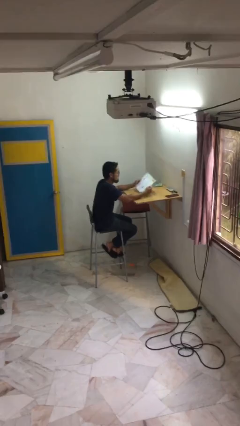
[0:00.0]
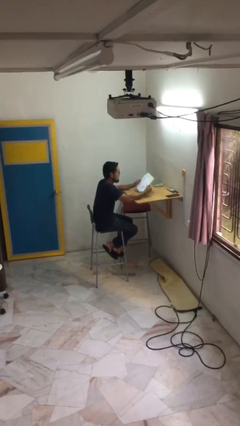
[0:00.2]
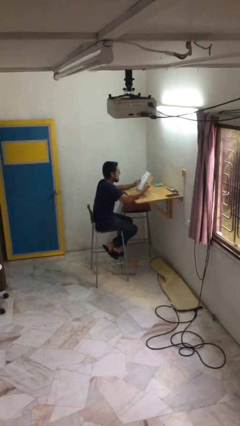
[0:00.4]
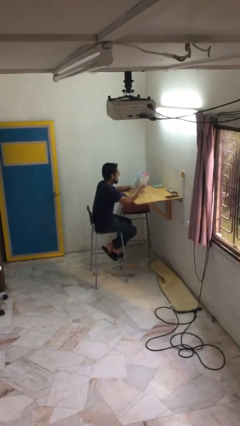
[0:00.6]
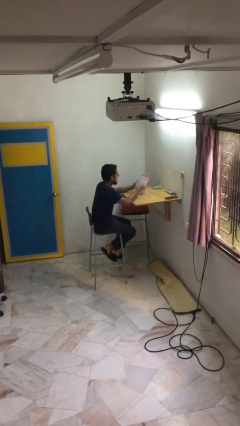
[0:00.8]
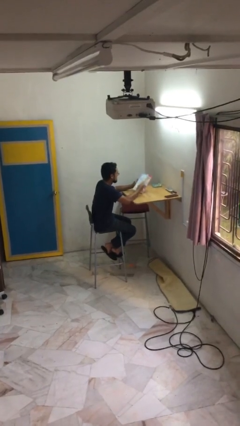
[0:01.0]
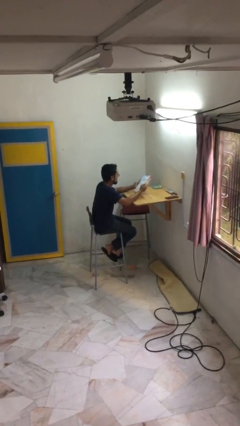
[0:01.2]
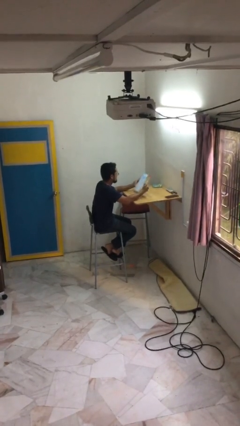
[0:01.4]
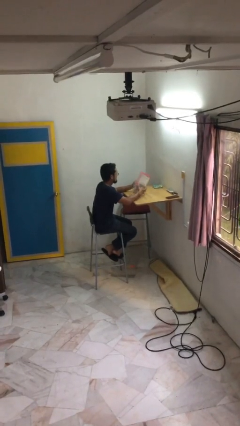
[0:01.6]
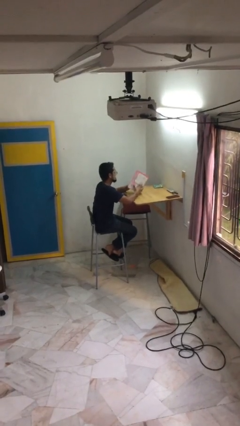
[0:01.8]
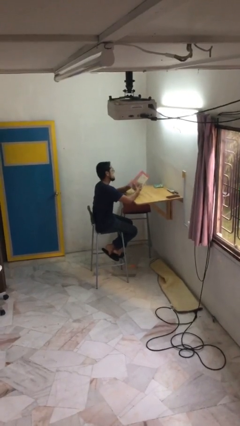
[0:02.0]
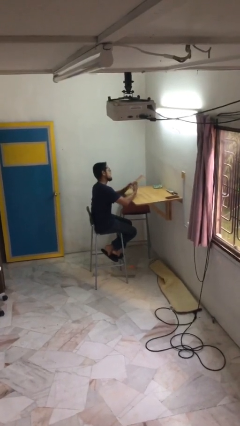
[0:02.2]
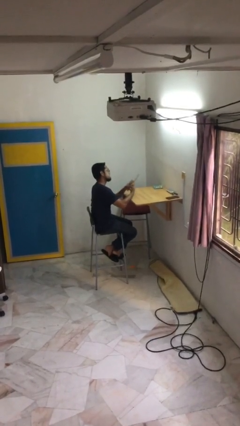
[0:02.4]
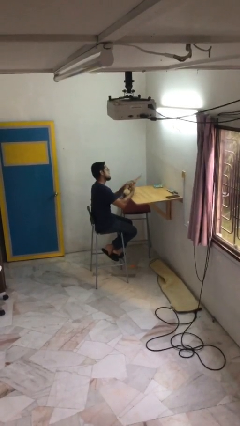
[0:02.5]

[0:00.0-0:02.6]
person reads document

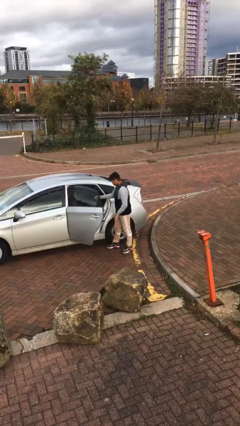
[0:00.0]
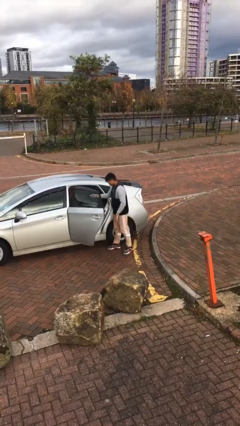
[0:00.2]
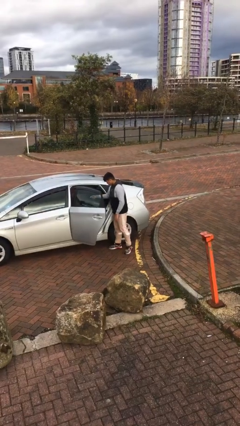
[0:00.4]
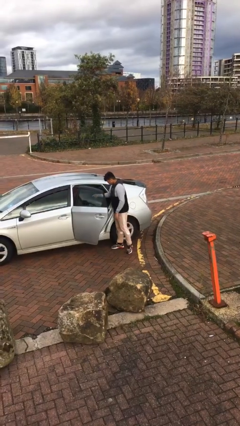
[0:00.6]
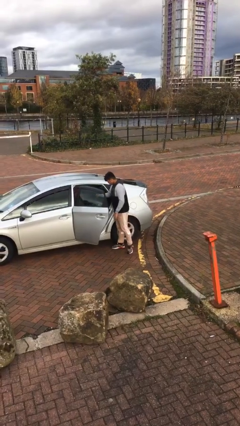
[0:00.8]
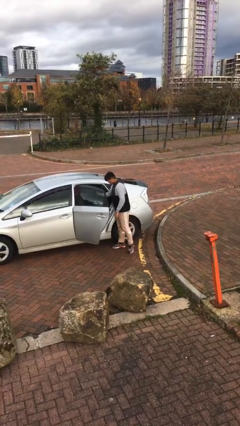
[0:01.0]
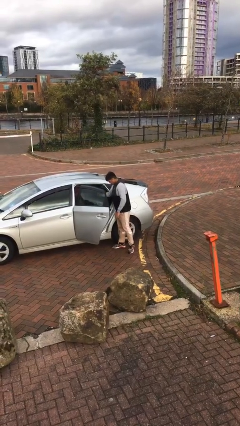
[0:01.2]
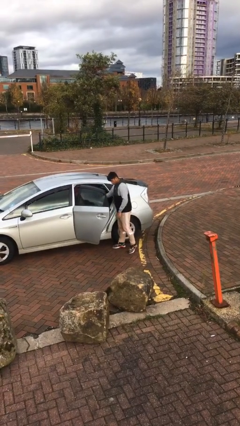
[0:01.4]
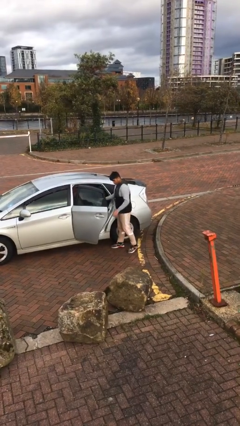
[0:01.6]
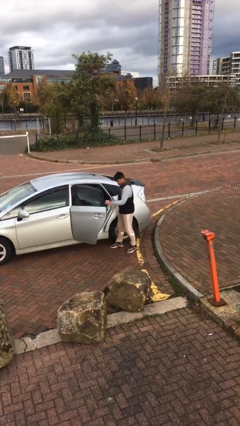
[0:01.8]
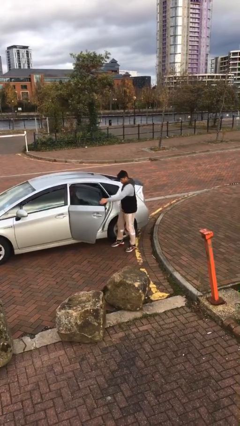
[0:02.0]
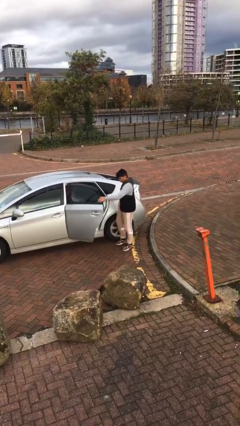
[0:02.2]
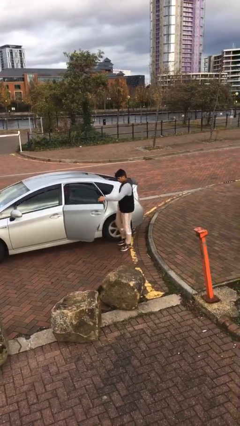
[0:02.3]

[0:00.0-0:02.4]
person loads car

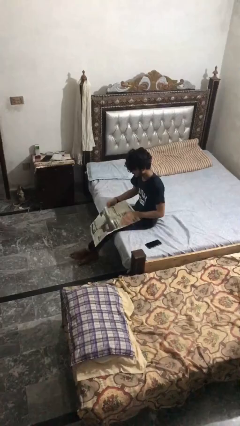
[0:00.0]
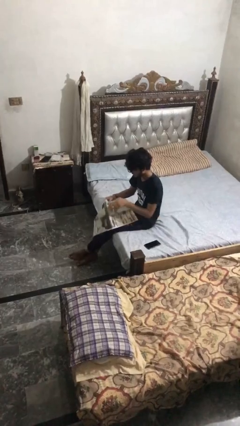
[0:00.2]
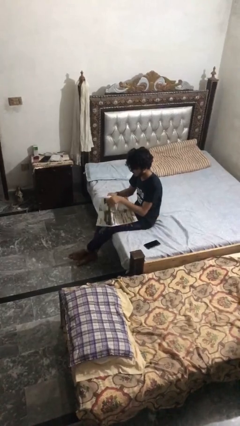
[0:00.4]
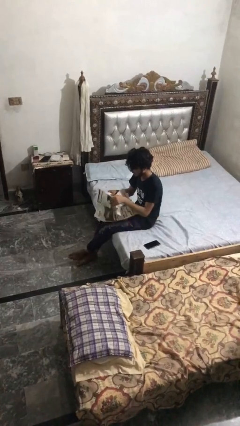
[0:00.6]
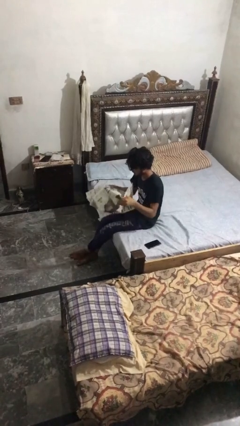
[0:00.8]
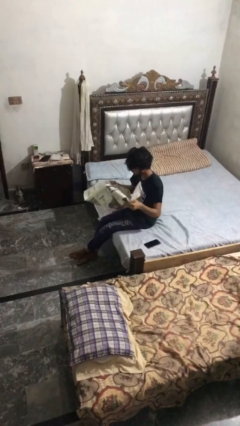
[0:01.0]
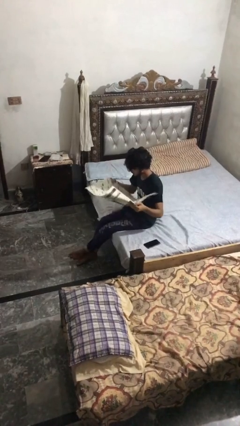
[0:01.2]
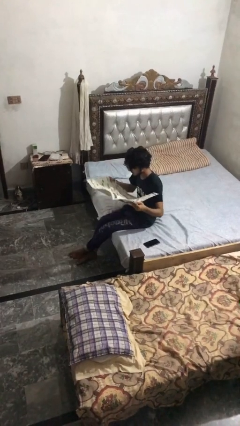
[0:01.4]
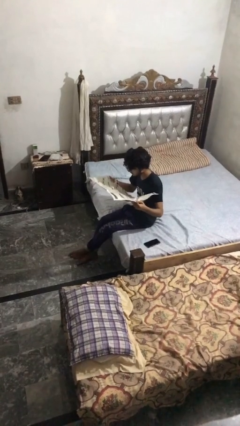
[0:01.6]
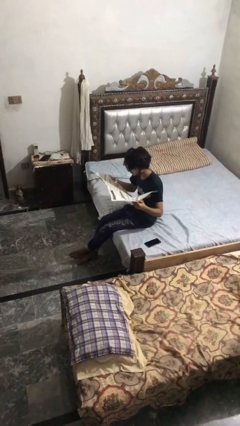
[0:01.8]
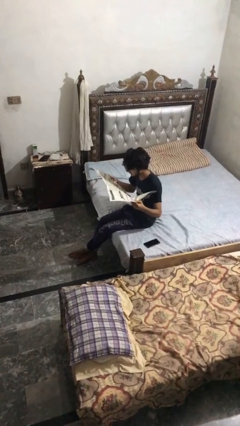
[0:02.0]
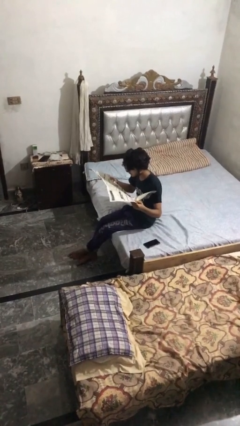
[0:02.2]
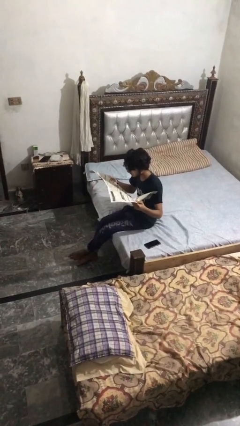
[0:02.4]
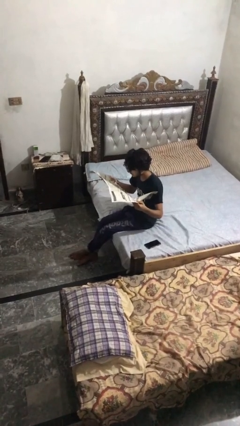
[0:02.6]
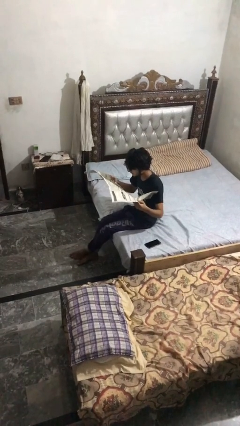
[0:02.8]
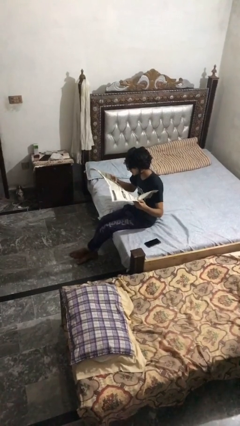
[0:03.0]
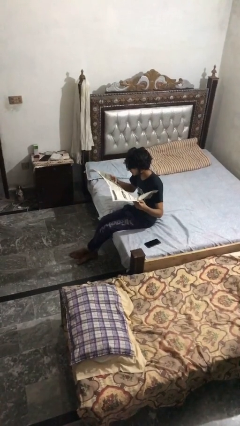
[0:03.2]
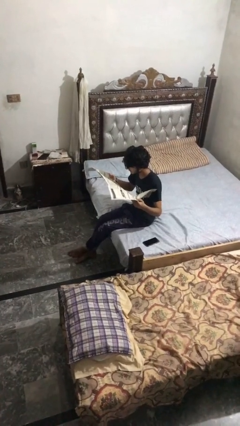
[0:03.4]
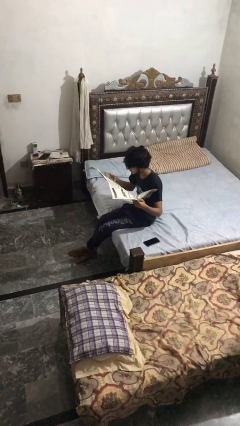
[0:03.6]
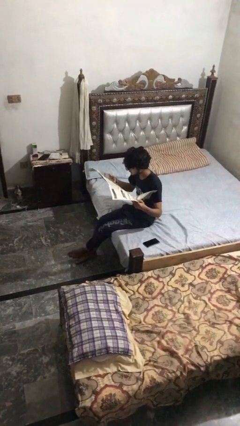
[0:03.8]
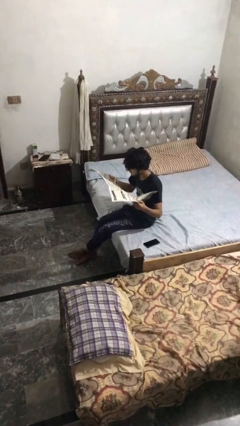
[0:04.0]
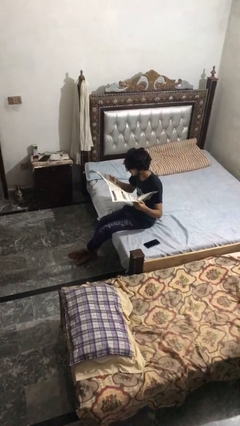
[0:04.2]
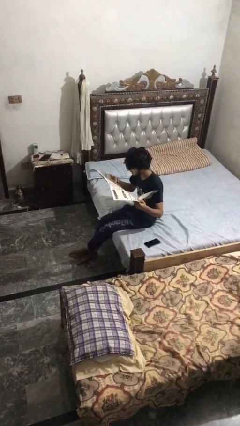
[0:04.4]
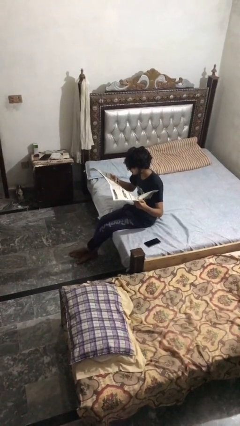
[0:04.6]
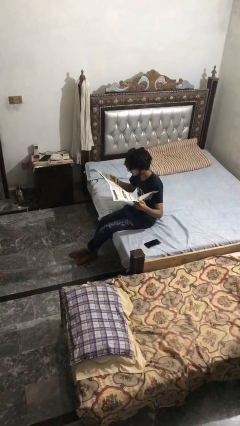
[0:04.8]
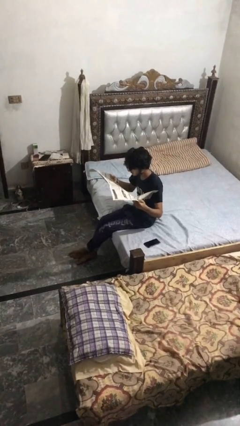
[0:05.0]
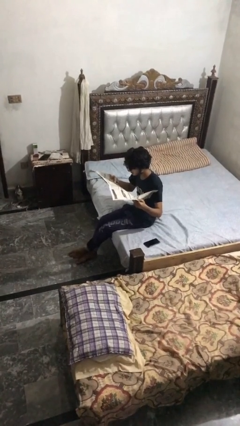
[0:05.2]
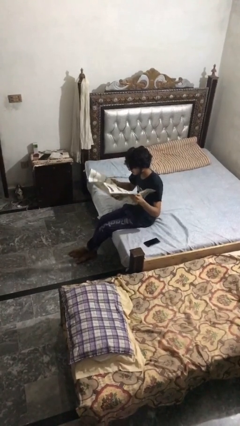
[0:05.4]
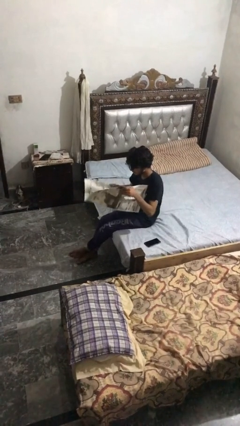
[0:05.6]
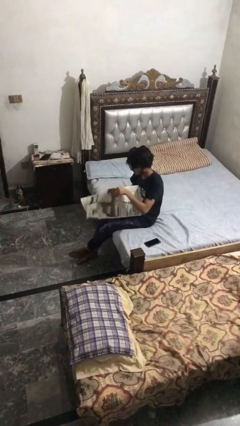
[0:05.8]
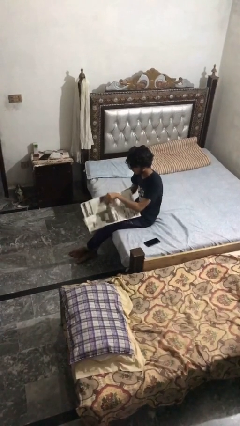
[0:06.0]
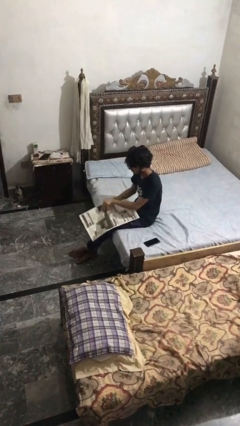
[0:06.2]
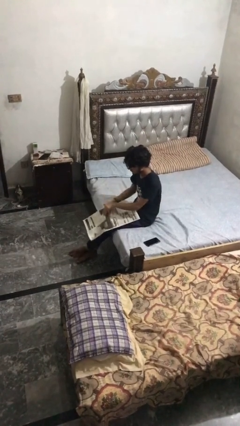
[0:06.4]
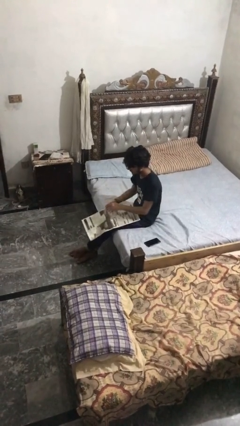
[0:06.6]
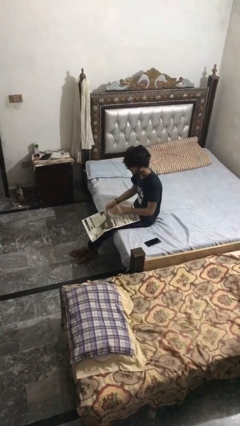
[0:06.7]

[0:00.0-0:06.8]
person reads newspaper

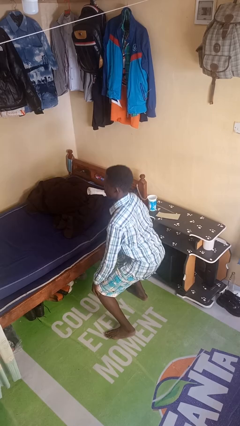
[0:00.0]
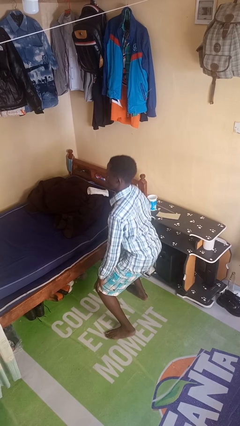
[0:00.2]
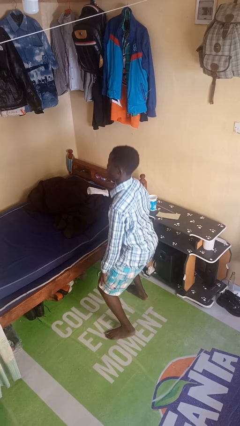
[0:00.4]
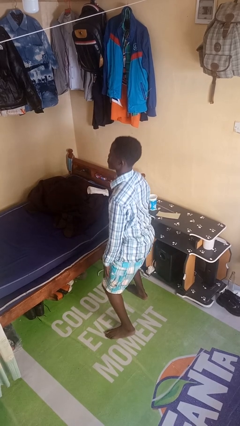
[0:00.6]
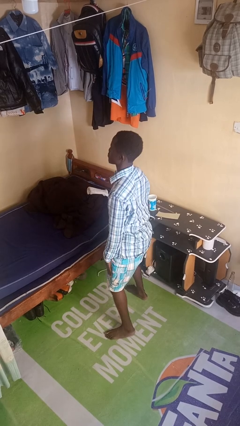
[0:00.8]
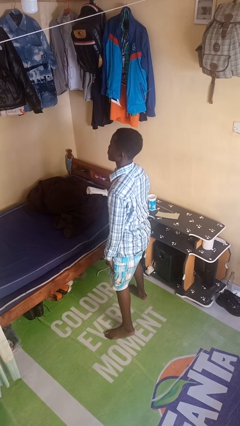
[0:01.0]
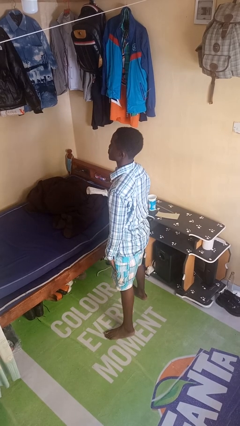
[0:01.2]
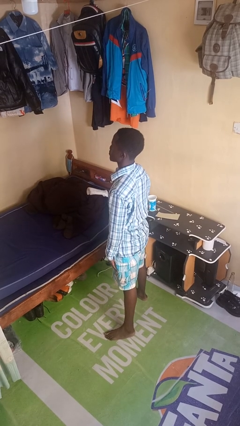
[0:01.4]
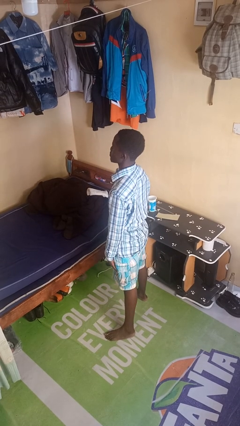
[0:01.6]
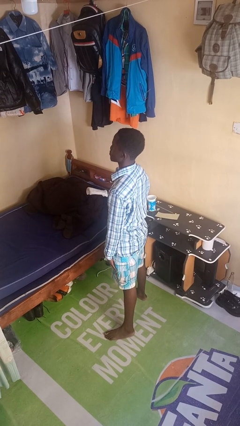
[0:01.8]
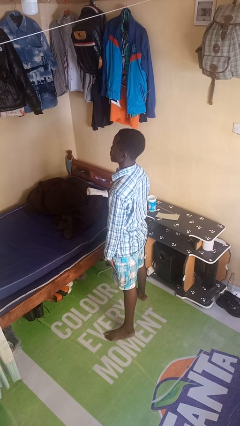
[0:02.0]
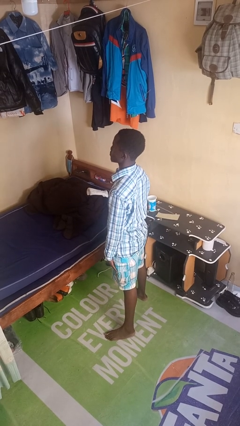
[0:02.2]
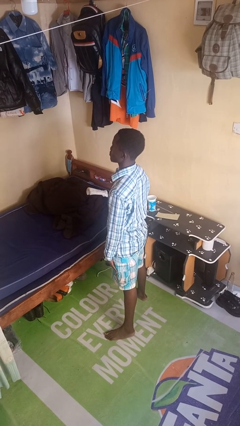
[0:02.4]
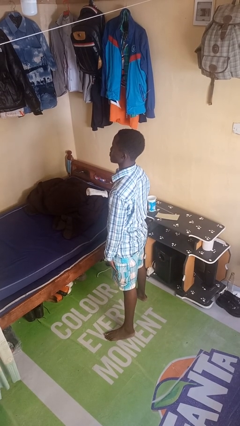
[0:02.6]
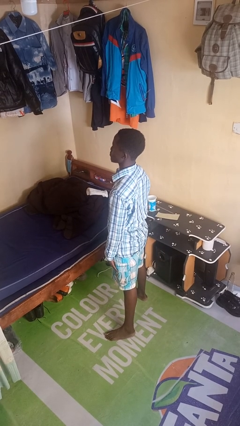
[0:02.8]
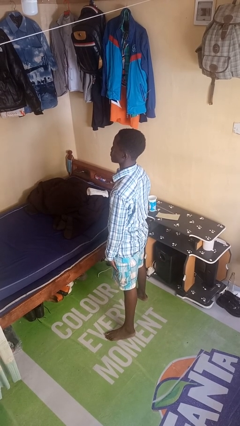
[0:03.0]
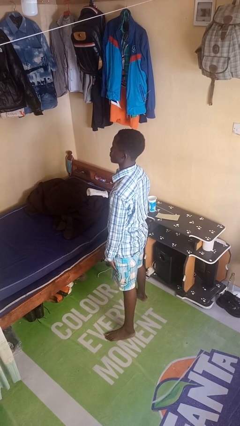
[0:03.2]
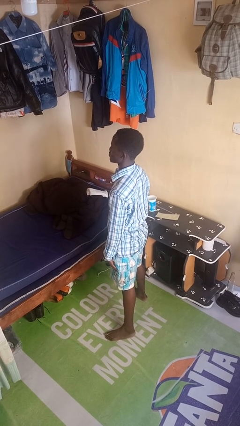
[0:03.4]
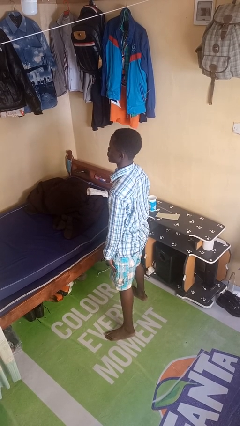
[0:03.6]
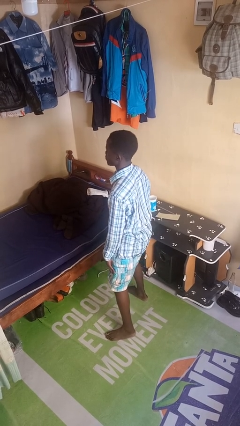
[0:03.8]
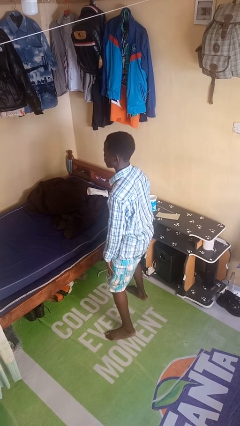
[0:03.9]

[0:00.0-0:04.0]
person stands up

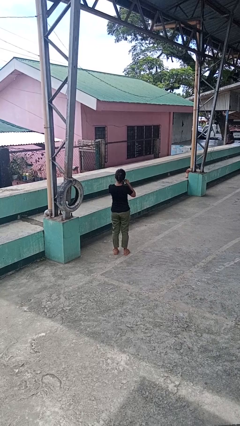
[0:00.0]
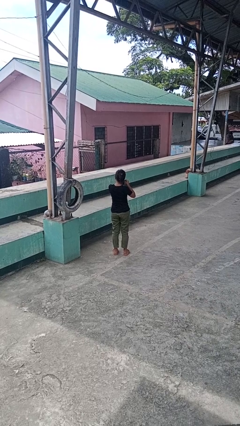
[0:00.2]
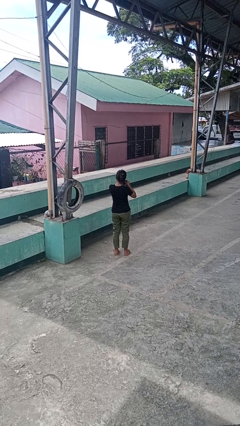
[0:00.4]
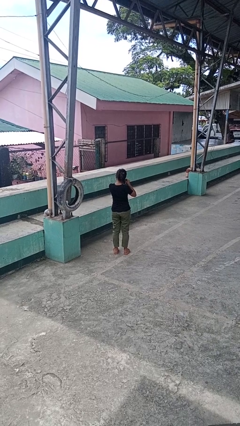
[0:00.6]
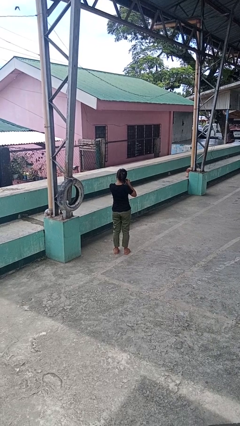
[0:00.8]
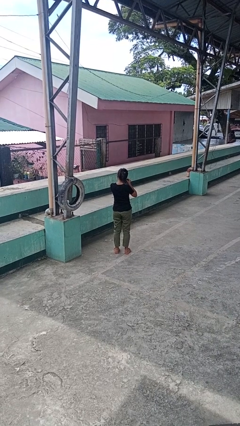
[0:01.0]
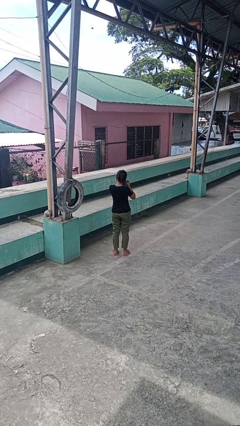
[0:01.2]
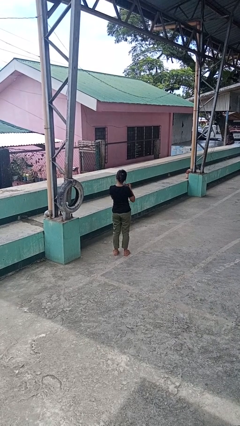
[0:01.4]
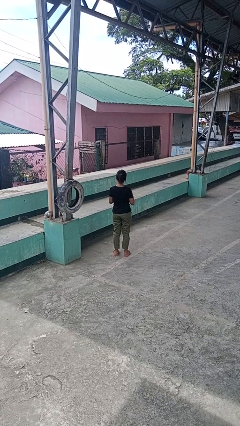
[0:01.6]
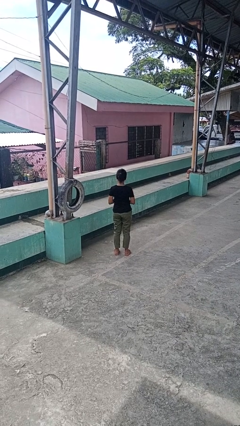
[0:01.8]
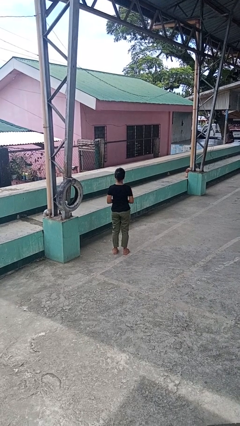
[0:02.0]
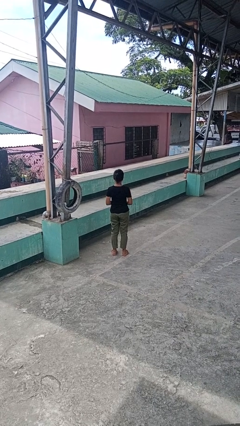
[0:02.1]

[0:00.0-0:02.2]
person takes off earrings
